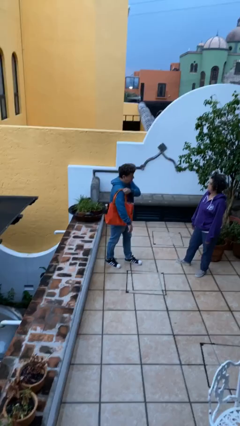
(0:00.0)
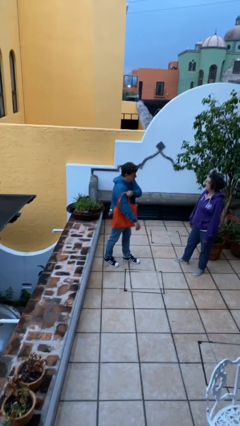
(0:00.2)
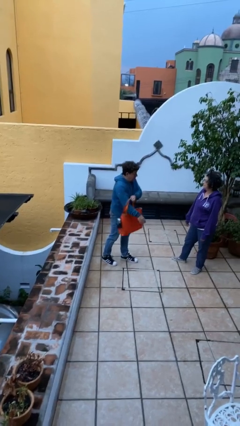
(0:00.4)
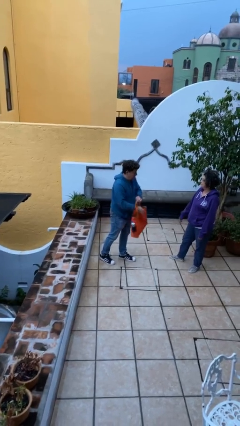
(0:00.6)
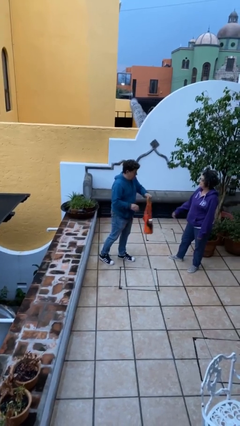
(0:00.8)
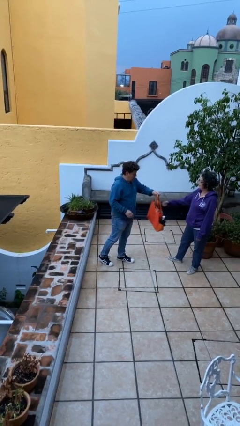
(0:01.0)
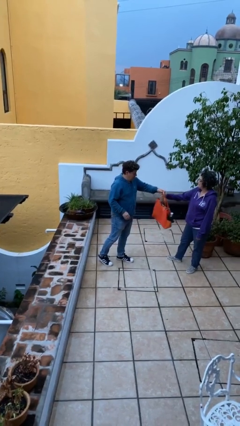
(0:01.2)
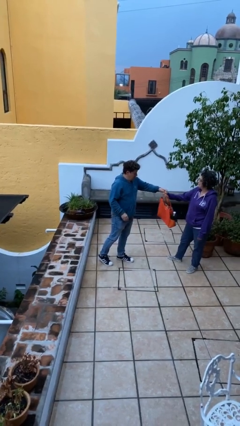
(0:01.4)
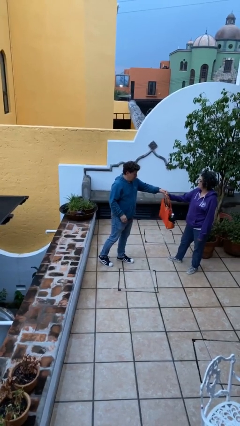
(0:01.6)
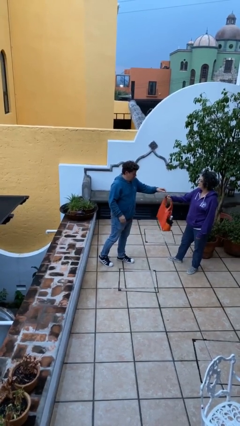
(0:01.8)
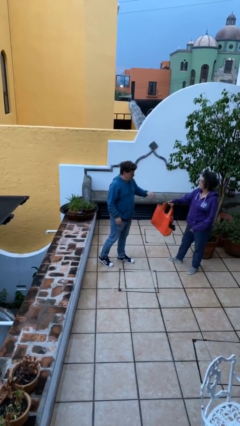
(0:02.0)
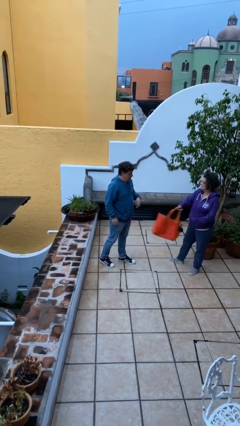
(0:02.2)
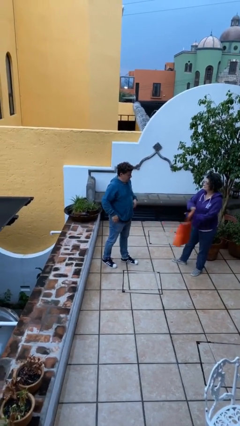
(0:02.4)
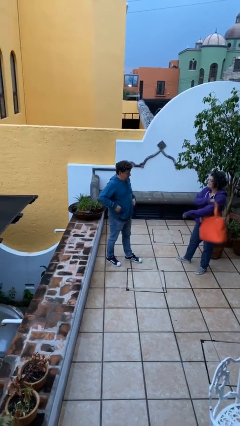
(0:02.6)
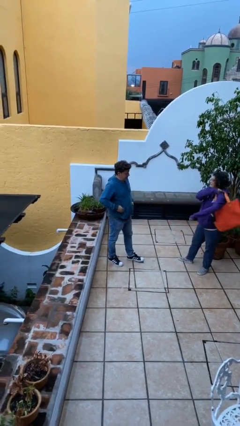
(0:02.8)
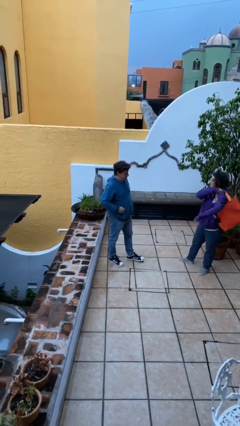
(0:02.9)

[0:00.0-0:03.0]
person transfers object to person

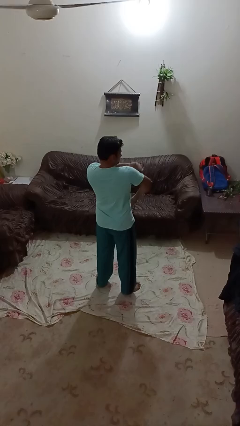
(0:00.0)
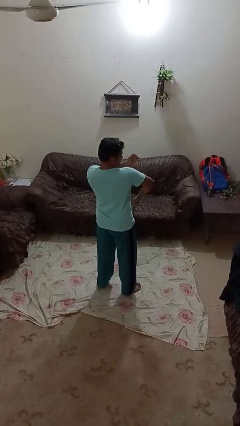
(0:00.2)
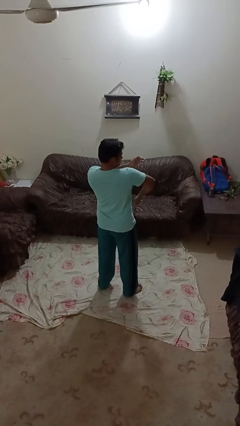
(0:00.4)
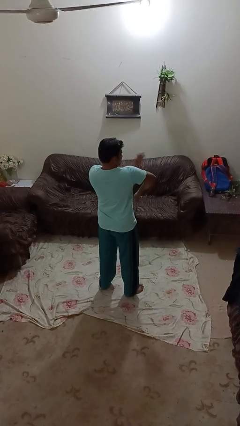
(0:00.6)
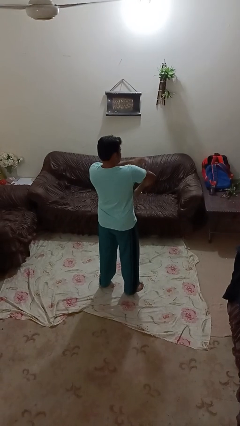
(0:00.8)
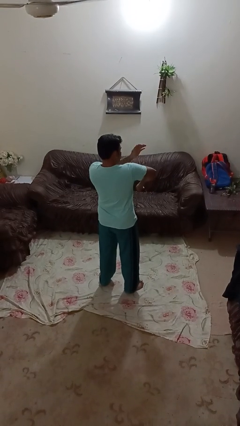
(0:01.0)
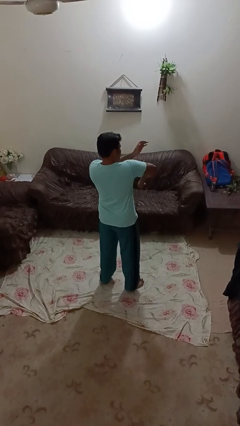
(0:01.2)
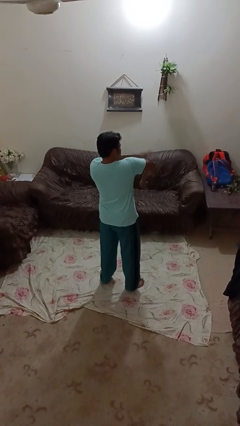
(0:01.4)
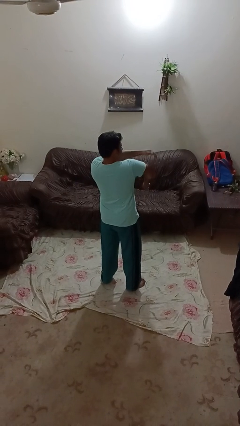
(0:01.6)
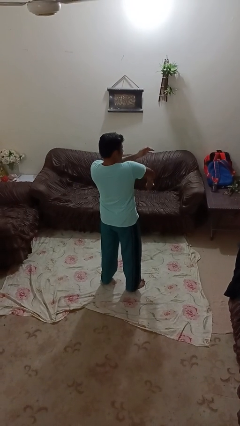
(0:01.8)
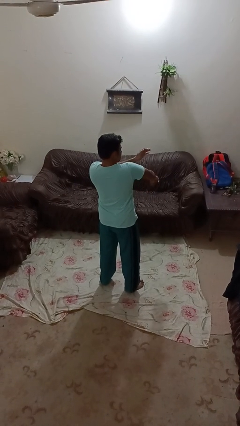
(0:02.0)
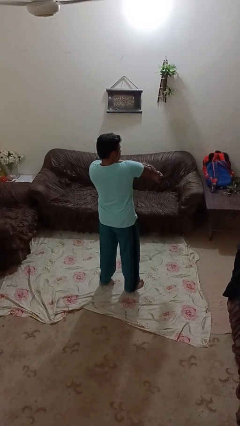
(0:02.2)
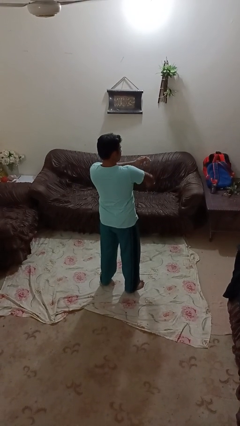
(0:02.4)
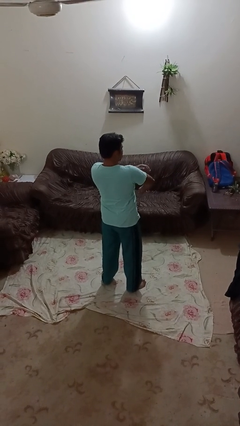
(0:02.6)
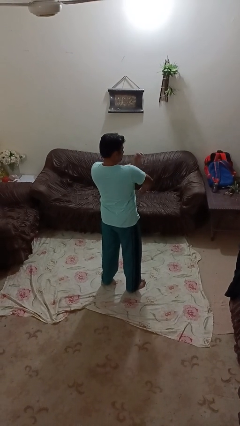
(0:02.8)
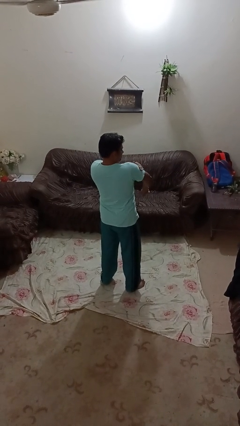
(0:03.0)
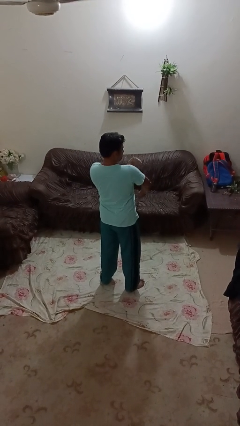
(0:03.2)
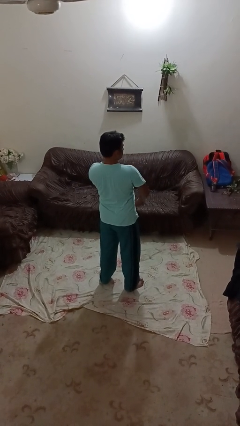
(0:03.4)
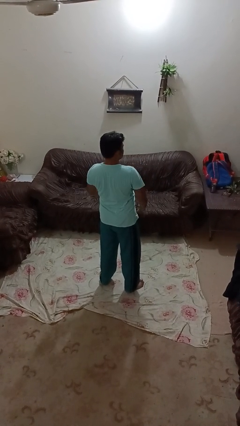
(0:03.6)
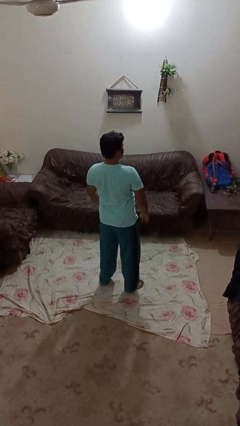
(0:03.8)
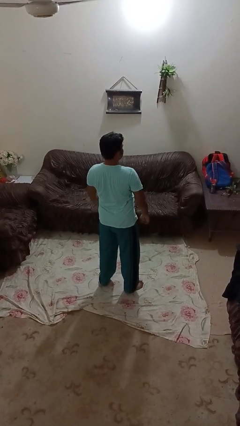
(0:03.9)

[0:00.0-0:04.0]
person swats bug

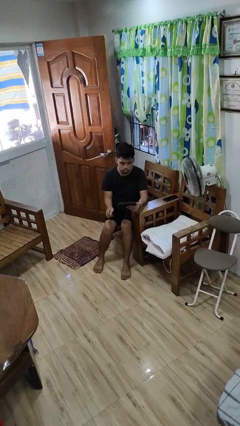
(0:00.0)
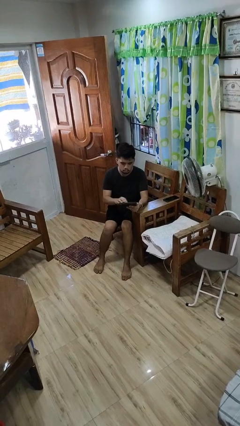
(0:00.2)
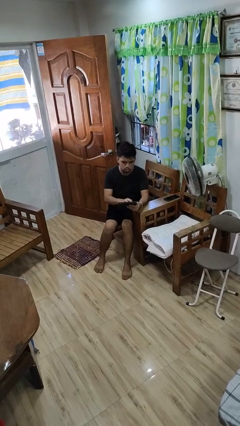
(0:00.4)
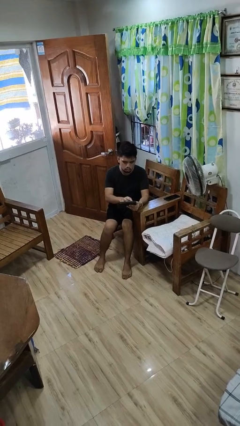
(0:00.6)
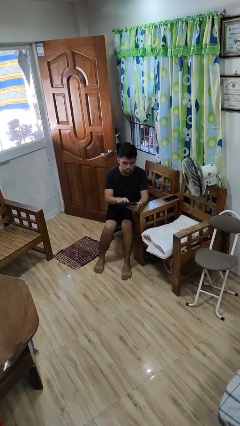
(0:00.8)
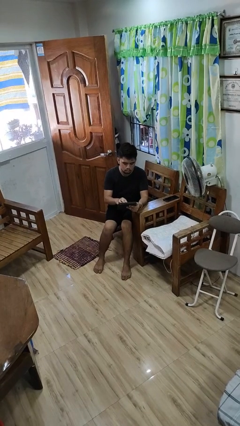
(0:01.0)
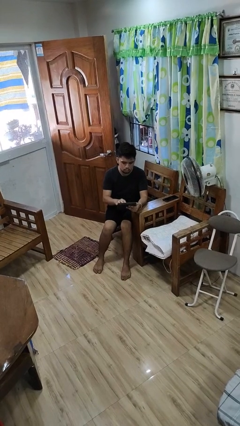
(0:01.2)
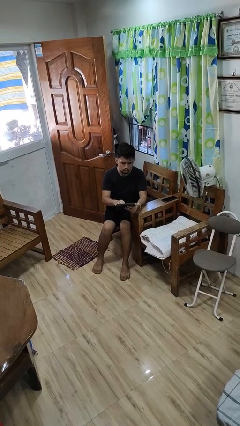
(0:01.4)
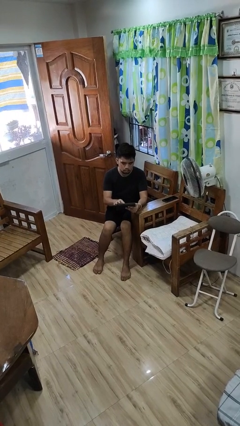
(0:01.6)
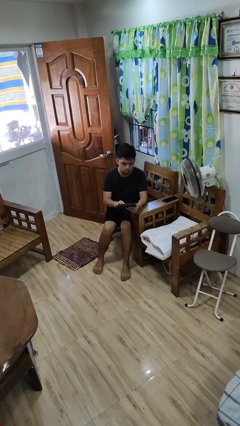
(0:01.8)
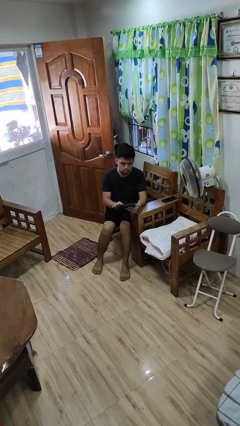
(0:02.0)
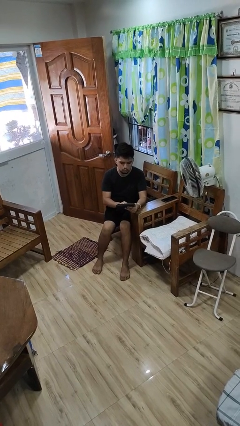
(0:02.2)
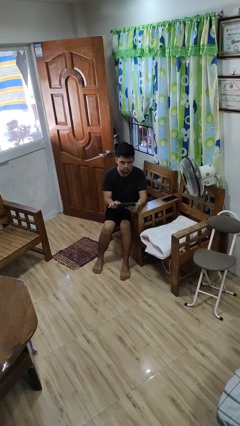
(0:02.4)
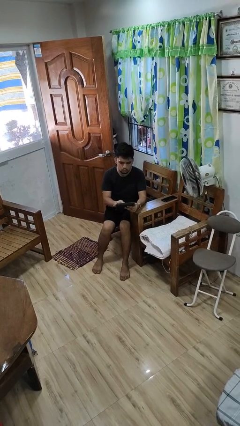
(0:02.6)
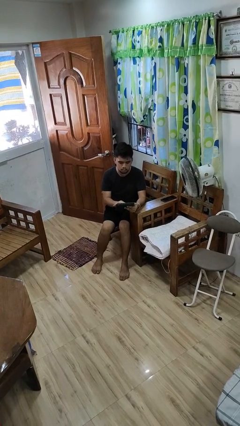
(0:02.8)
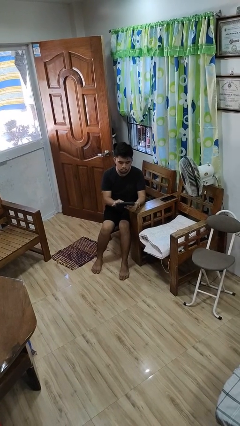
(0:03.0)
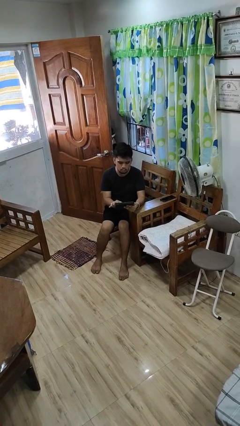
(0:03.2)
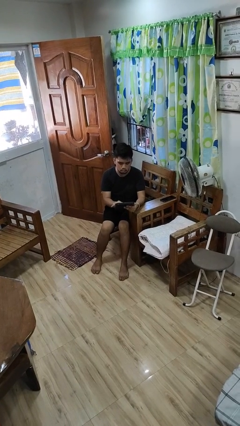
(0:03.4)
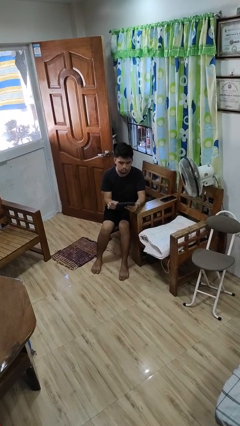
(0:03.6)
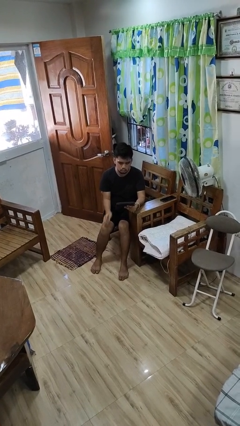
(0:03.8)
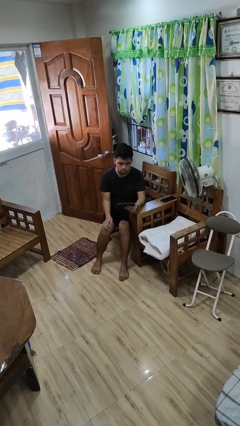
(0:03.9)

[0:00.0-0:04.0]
person interacts with tablet

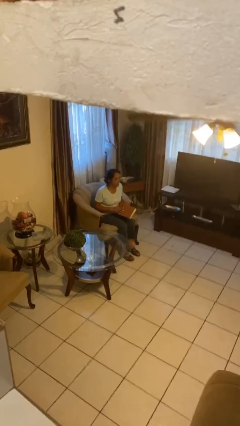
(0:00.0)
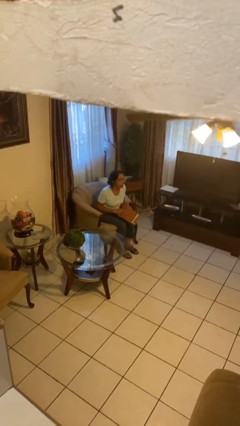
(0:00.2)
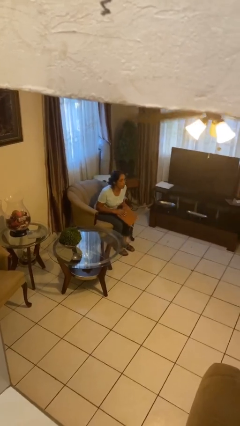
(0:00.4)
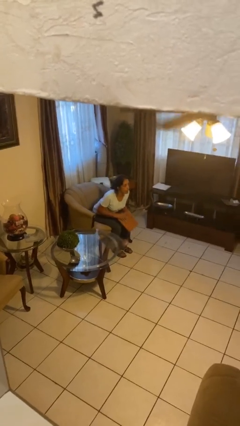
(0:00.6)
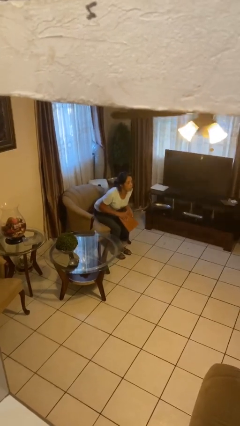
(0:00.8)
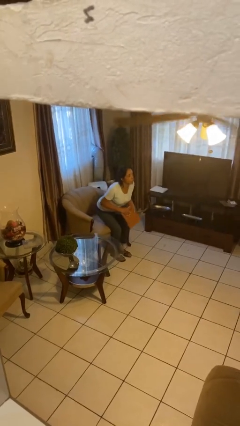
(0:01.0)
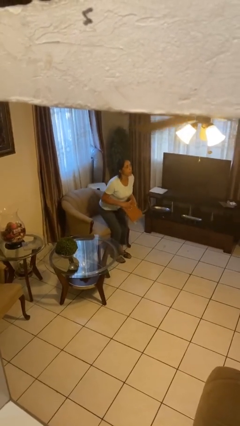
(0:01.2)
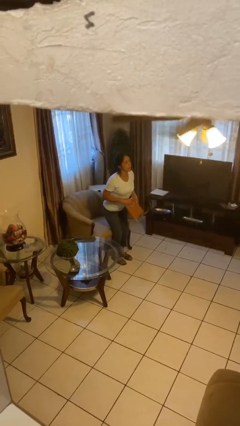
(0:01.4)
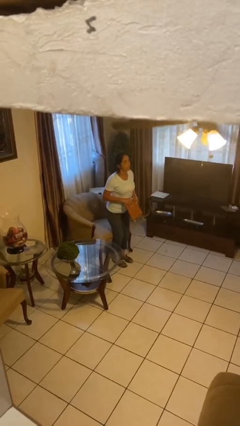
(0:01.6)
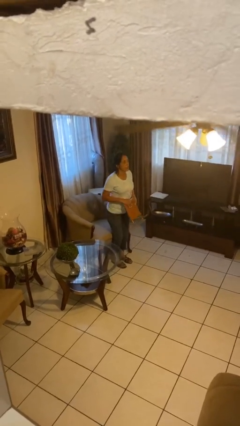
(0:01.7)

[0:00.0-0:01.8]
person stands up

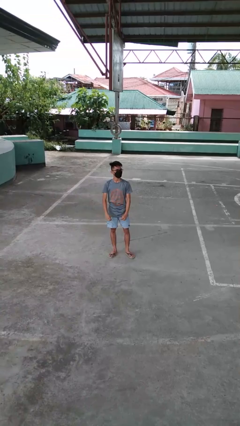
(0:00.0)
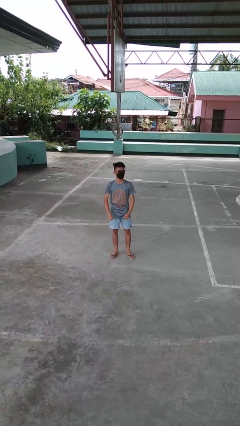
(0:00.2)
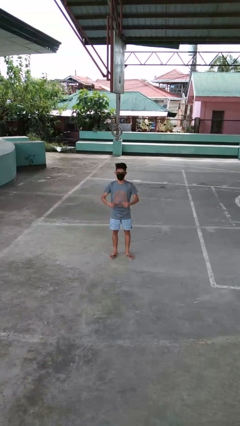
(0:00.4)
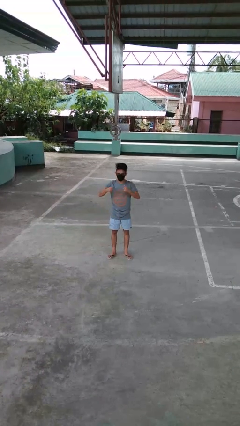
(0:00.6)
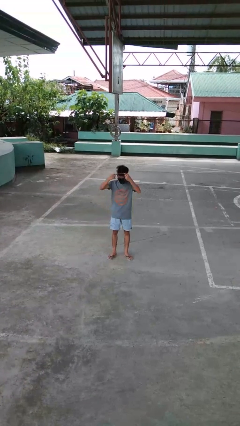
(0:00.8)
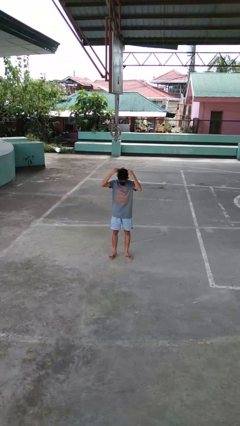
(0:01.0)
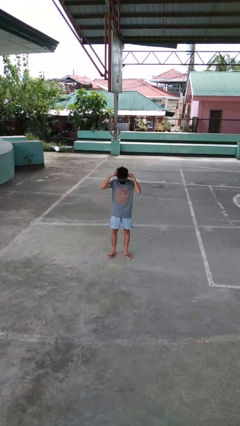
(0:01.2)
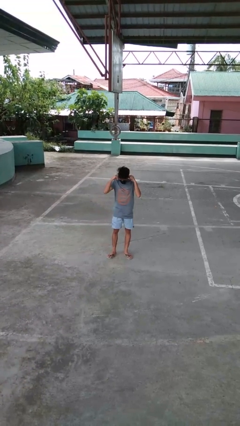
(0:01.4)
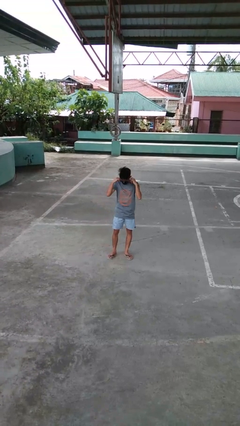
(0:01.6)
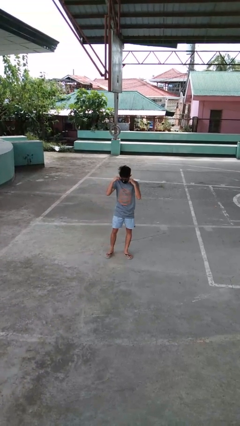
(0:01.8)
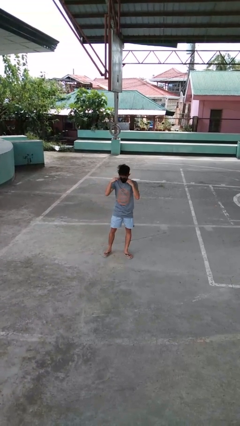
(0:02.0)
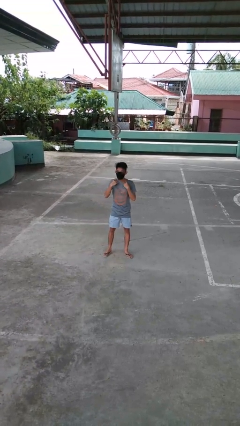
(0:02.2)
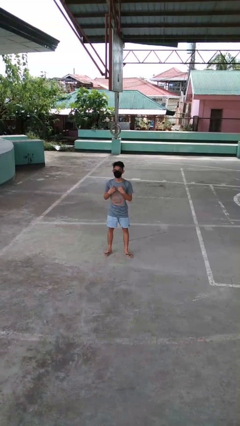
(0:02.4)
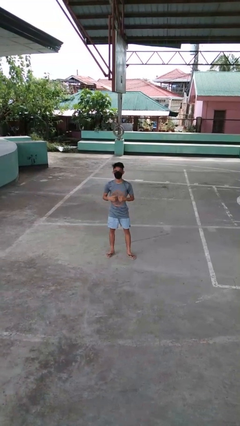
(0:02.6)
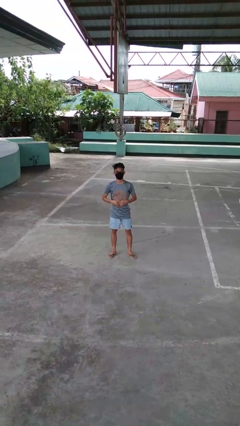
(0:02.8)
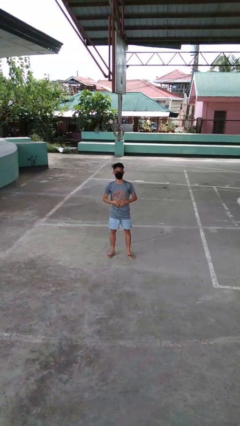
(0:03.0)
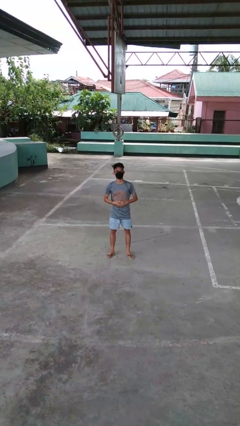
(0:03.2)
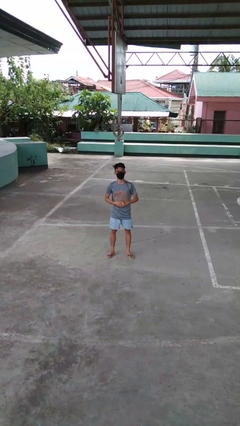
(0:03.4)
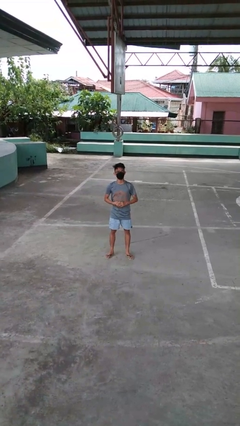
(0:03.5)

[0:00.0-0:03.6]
person puts on necklace

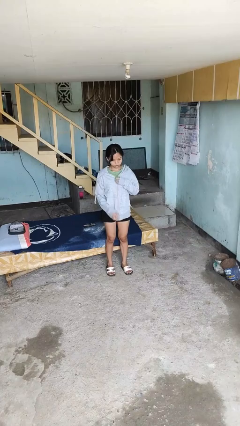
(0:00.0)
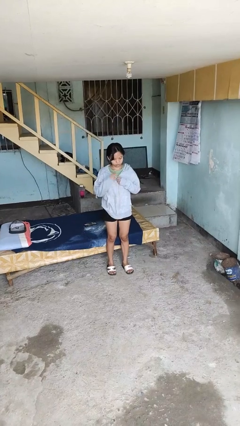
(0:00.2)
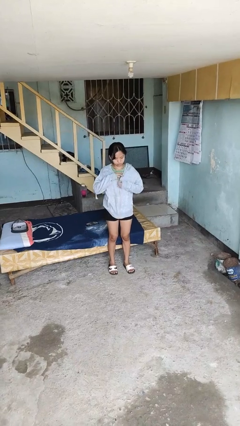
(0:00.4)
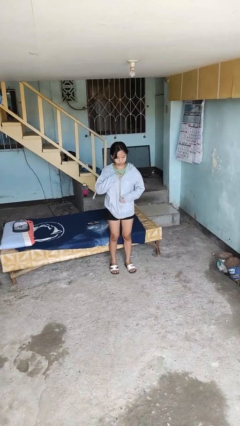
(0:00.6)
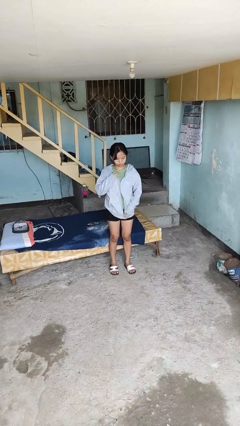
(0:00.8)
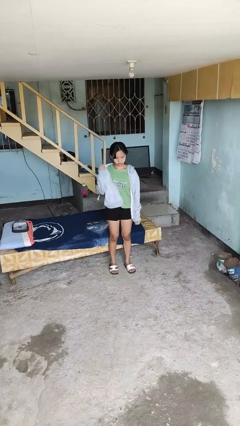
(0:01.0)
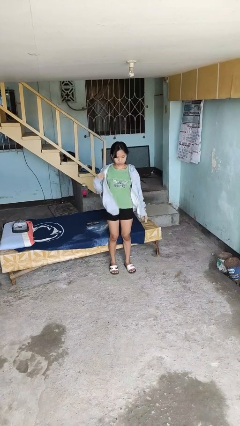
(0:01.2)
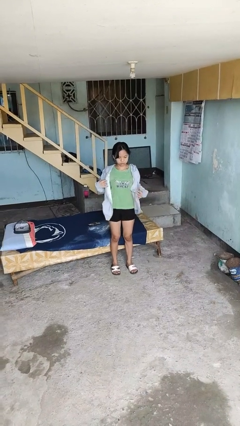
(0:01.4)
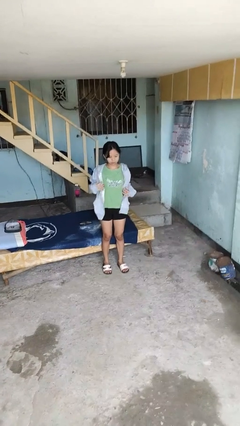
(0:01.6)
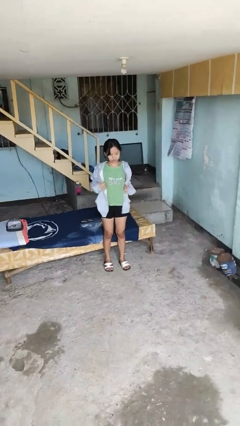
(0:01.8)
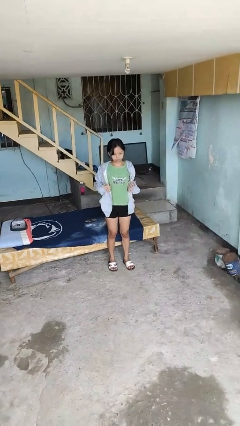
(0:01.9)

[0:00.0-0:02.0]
person unzips jacket
